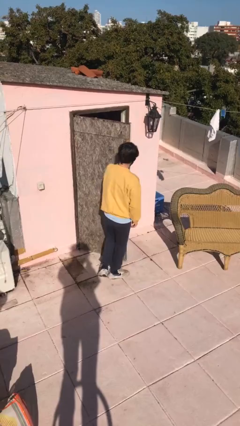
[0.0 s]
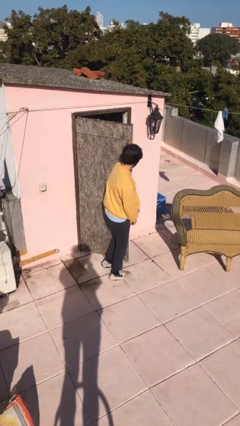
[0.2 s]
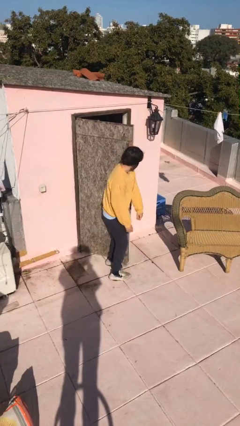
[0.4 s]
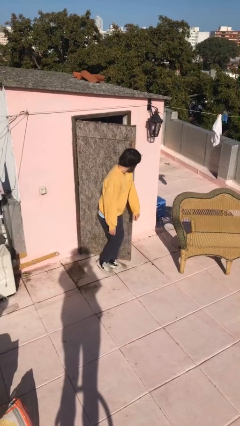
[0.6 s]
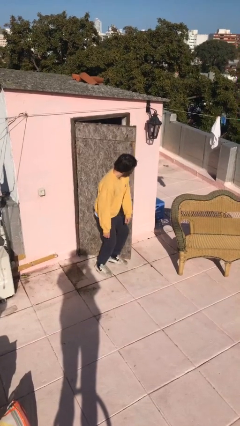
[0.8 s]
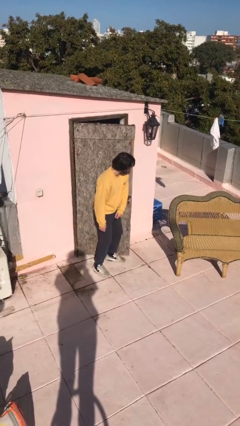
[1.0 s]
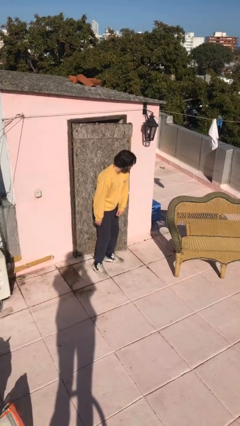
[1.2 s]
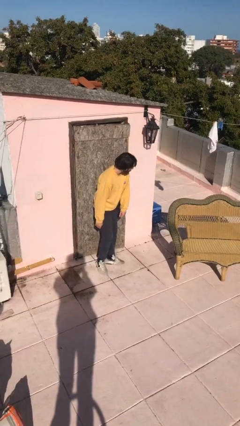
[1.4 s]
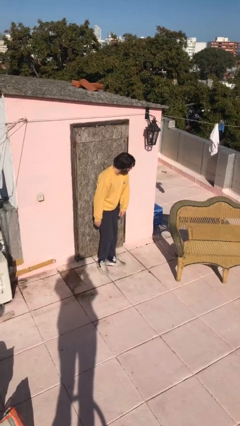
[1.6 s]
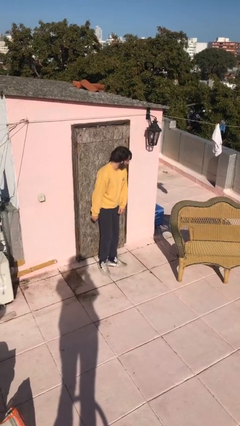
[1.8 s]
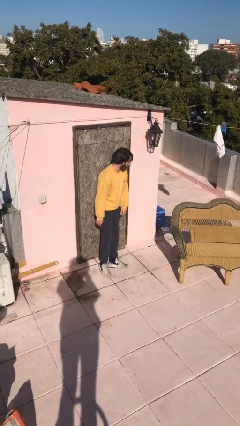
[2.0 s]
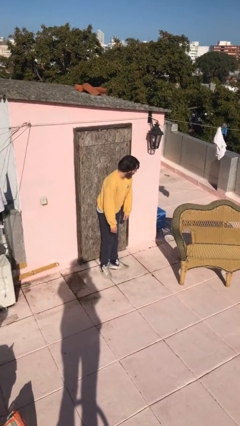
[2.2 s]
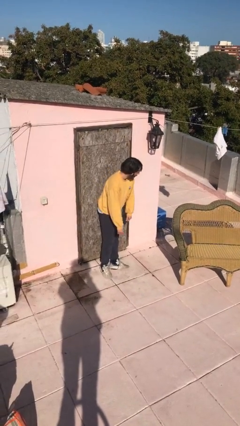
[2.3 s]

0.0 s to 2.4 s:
person closes door with hip

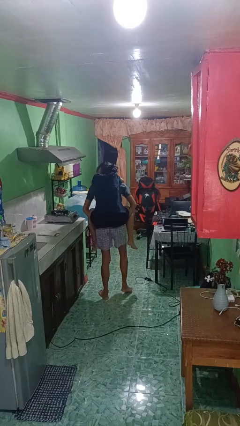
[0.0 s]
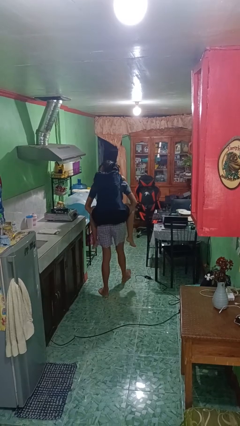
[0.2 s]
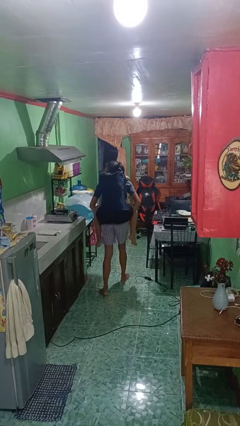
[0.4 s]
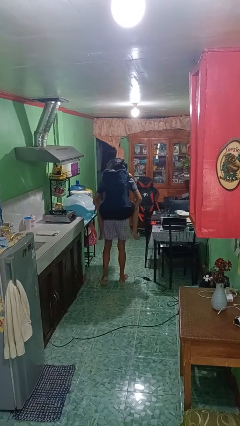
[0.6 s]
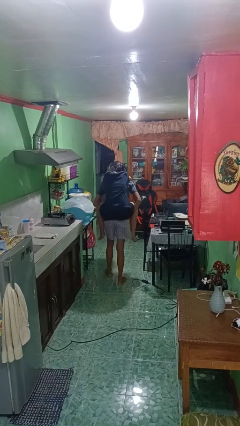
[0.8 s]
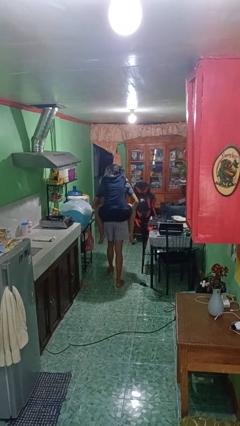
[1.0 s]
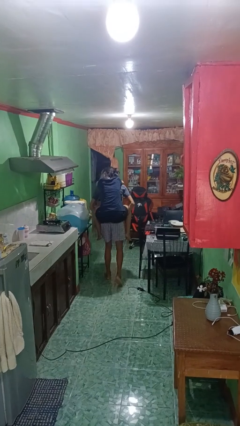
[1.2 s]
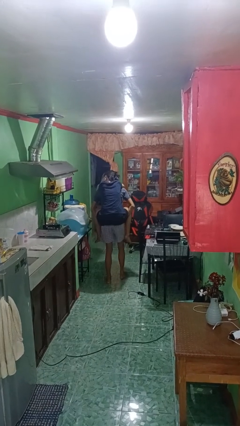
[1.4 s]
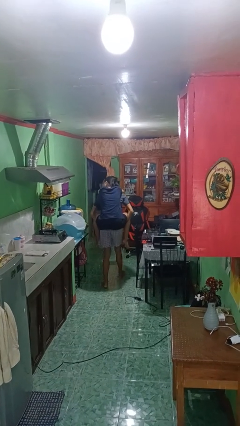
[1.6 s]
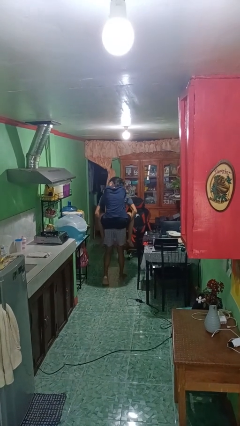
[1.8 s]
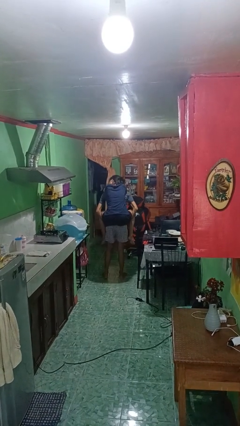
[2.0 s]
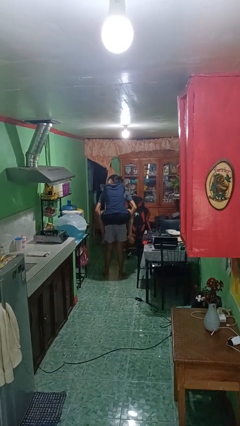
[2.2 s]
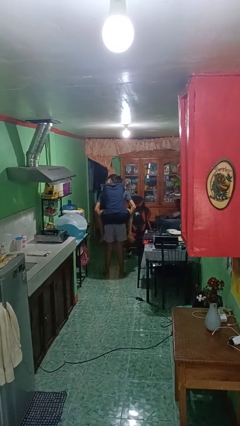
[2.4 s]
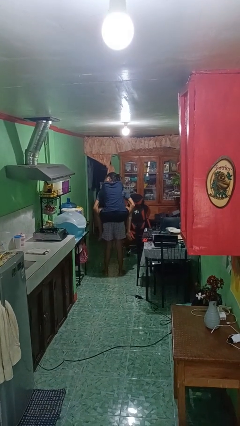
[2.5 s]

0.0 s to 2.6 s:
person carries person on back

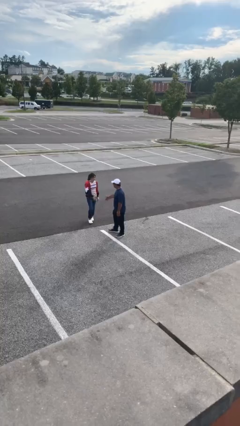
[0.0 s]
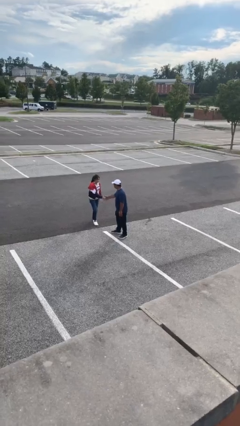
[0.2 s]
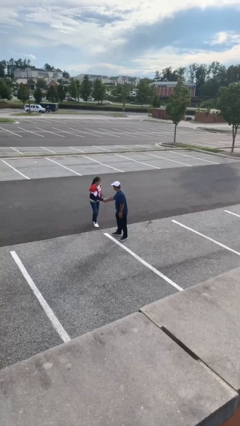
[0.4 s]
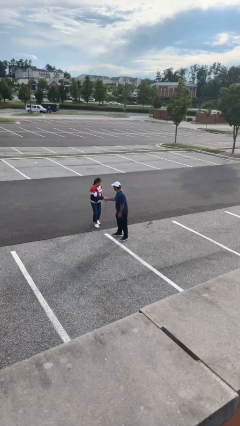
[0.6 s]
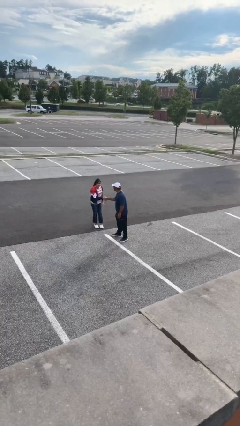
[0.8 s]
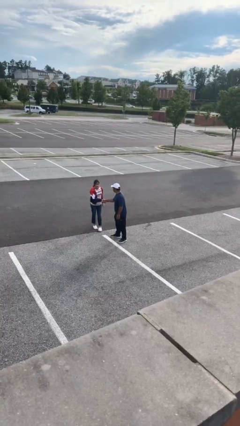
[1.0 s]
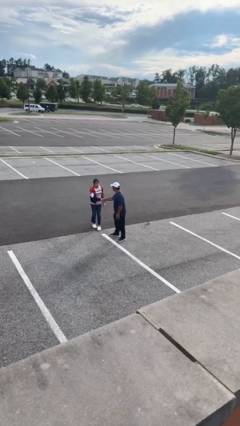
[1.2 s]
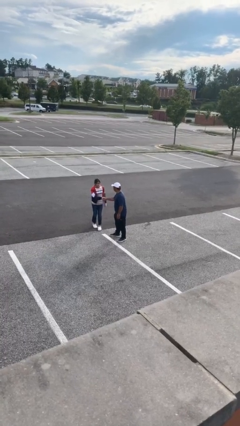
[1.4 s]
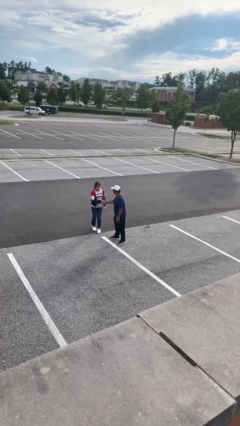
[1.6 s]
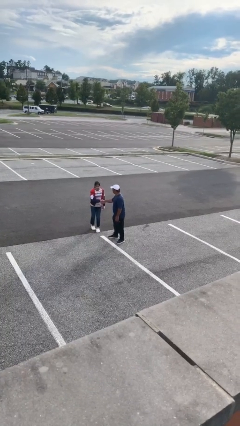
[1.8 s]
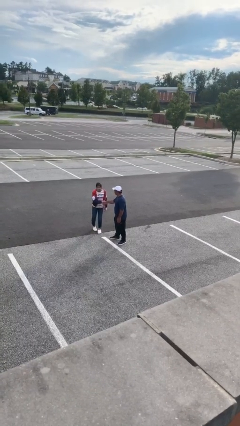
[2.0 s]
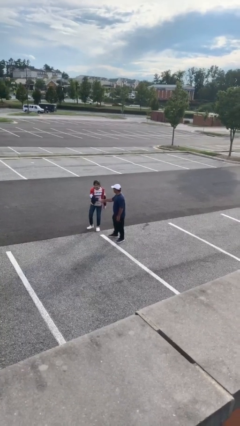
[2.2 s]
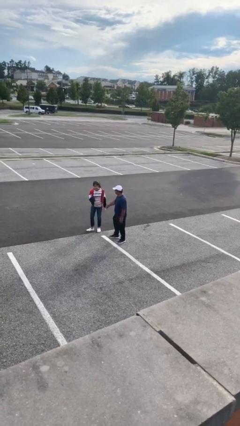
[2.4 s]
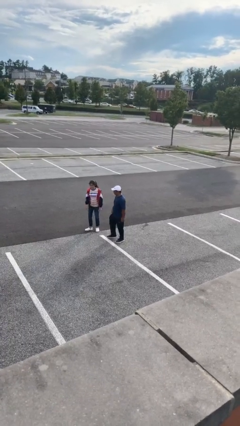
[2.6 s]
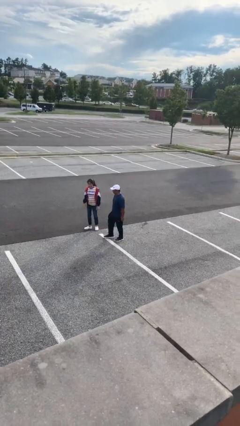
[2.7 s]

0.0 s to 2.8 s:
person shakes hand

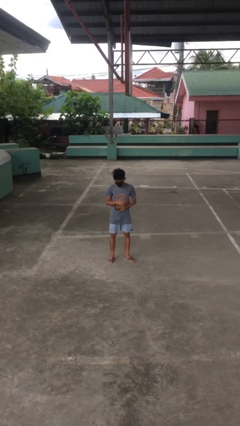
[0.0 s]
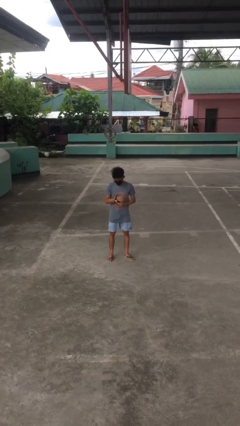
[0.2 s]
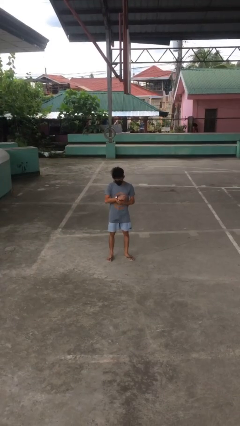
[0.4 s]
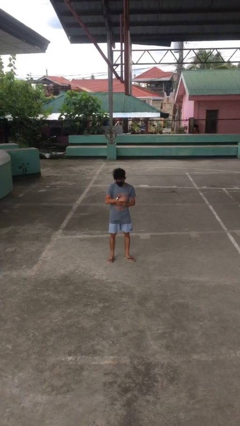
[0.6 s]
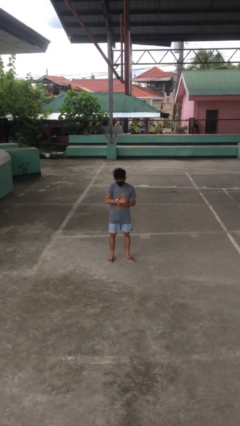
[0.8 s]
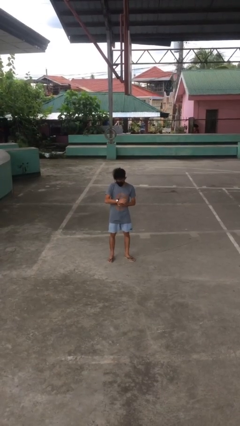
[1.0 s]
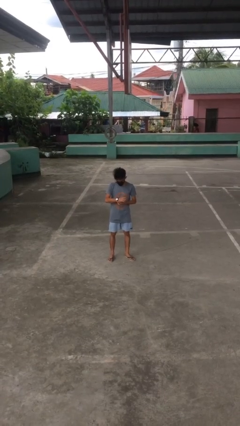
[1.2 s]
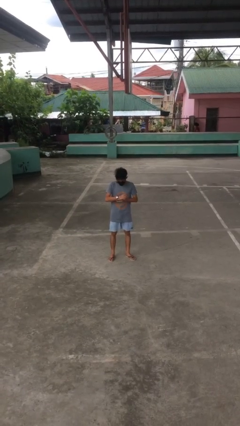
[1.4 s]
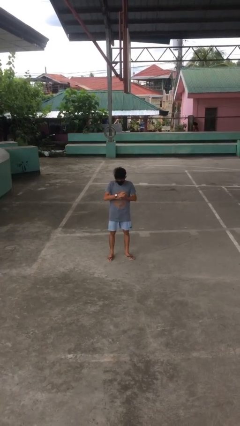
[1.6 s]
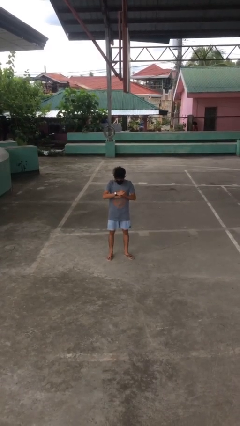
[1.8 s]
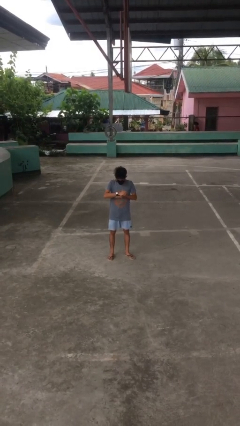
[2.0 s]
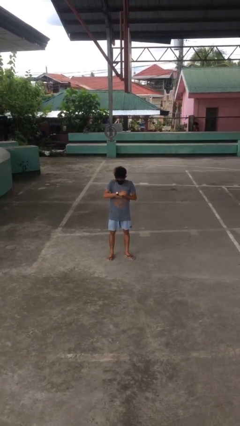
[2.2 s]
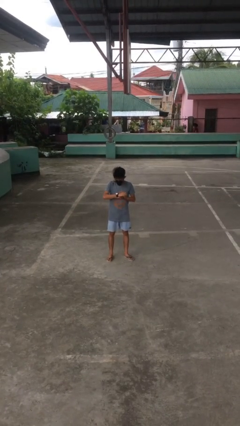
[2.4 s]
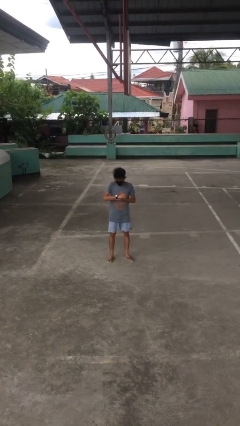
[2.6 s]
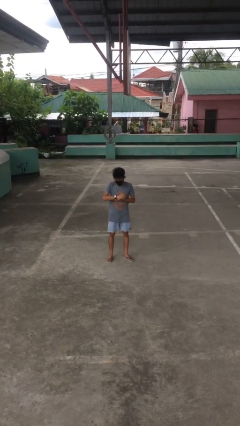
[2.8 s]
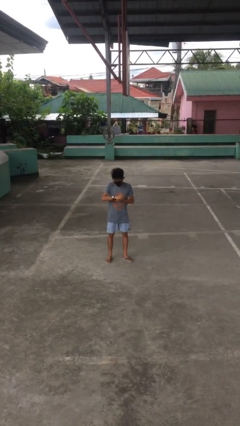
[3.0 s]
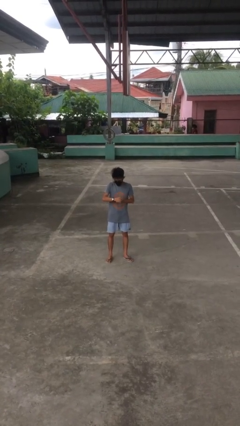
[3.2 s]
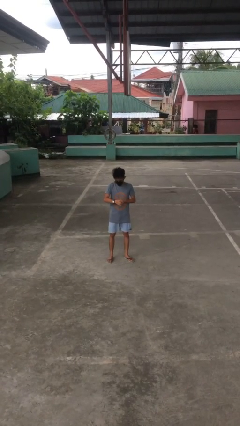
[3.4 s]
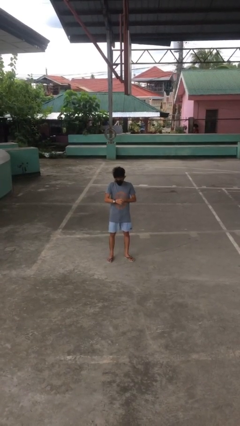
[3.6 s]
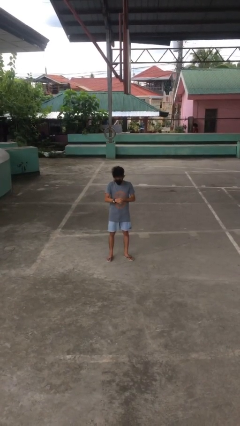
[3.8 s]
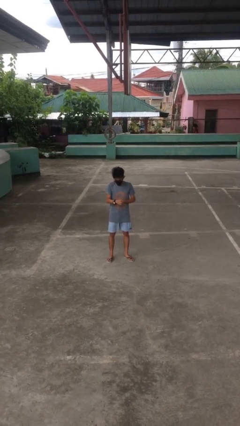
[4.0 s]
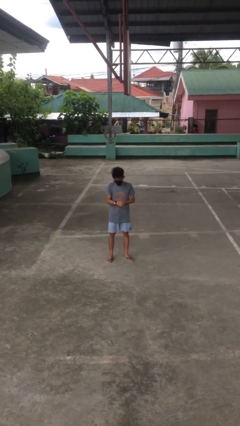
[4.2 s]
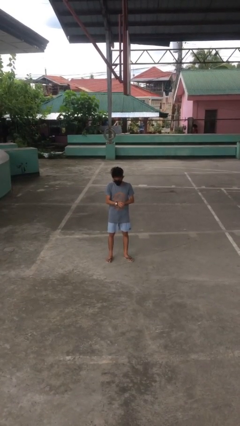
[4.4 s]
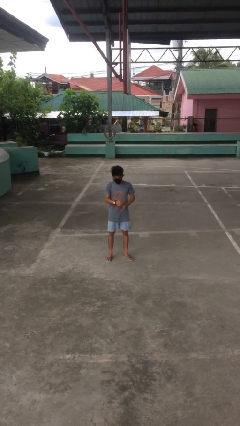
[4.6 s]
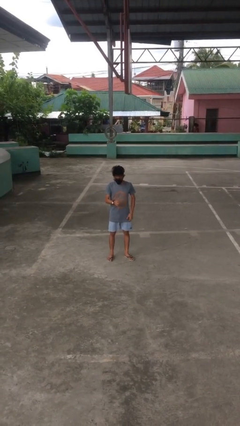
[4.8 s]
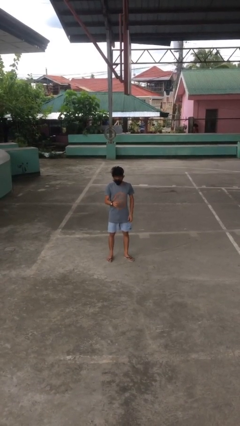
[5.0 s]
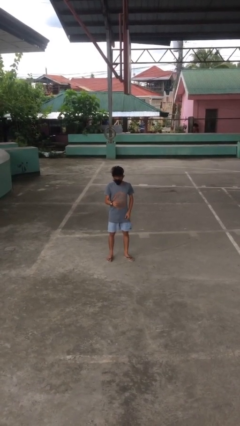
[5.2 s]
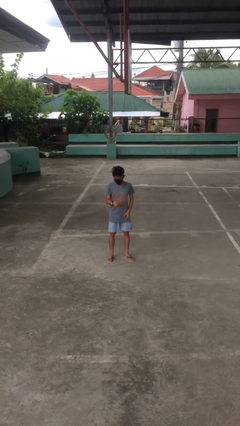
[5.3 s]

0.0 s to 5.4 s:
person puts on wristwatch

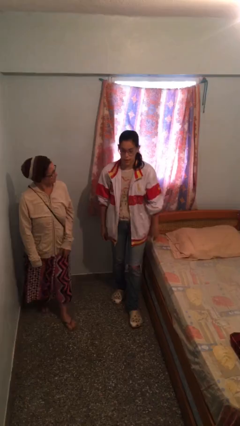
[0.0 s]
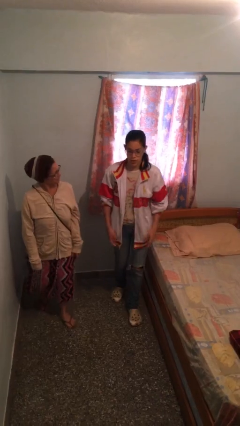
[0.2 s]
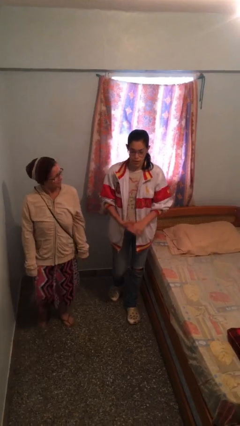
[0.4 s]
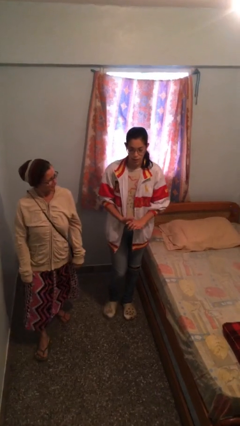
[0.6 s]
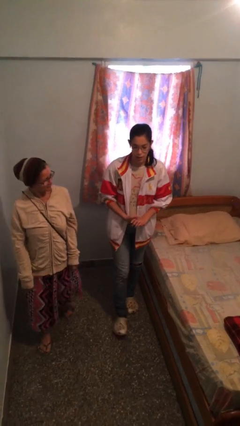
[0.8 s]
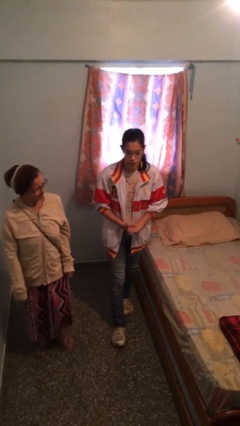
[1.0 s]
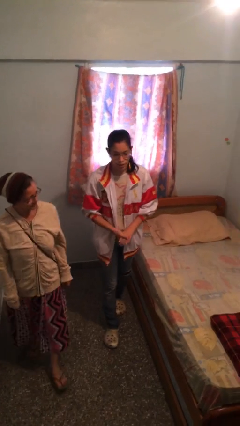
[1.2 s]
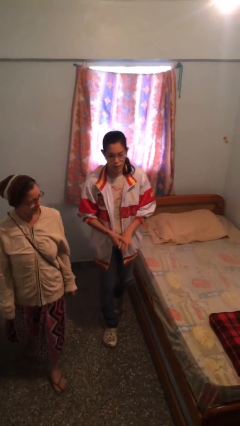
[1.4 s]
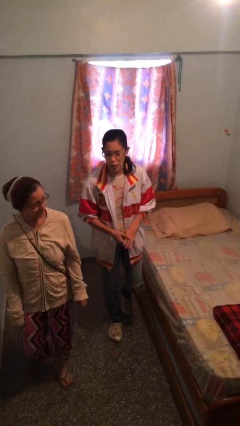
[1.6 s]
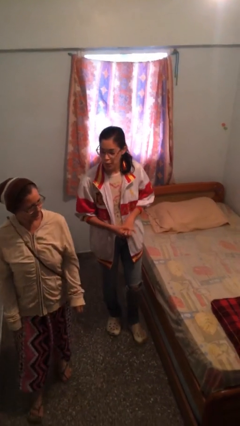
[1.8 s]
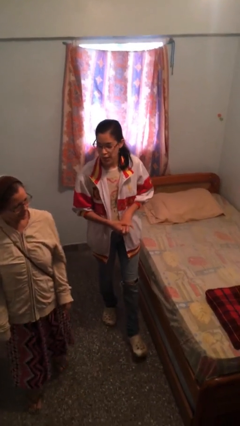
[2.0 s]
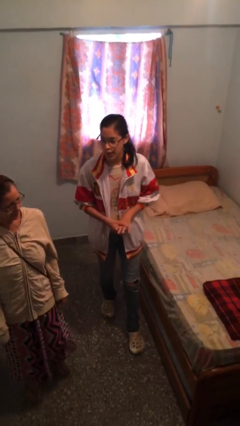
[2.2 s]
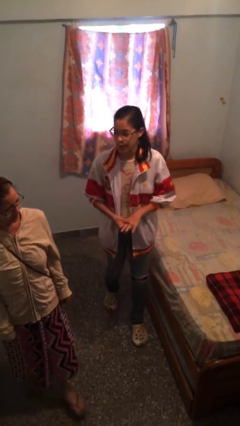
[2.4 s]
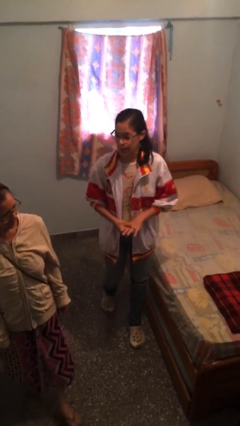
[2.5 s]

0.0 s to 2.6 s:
person talks to person

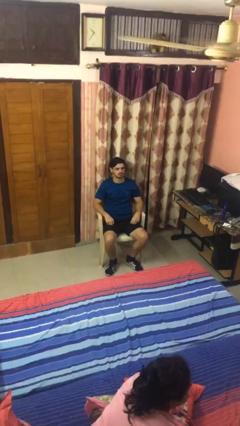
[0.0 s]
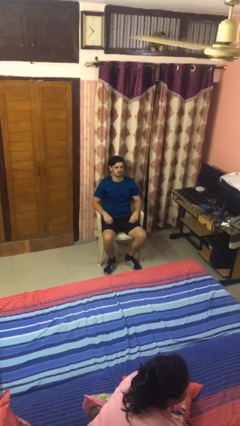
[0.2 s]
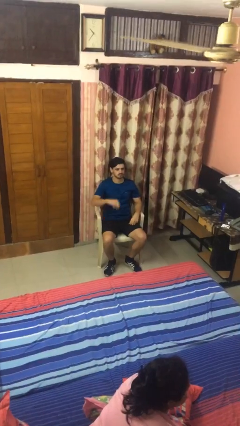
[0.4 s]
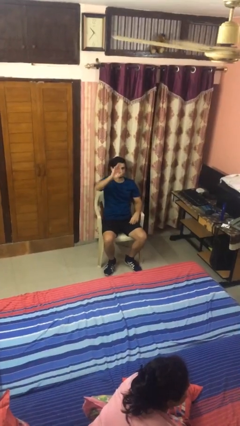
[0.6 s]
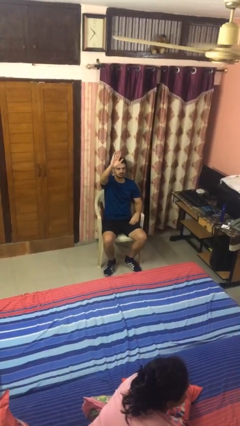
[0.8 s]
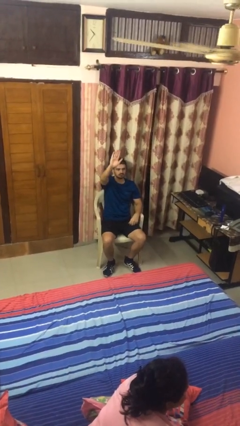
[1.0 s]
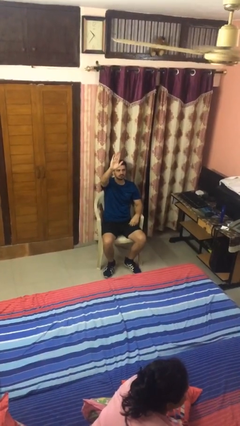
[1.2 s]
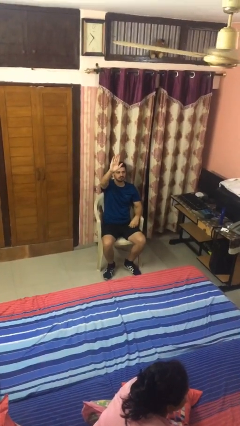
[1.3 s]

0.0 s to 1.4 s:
person gestures raise hand

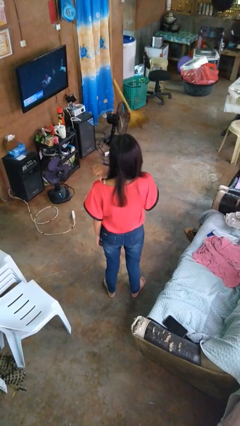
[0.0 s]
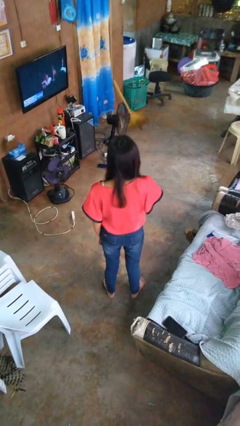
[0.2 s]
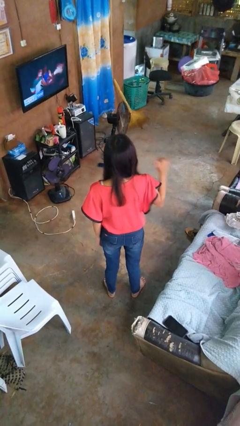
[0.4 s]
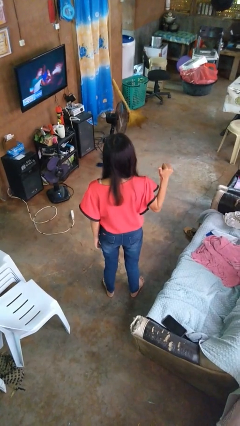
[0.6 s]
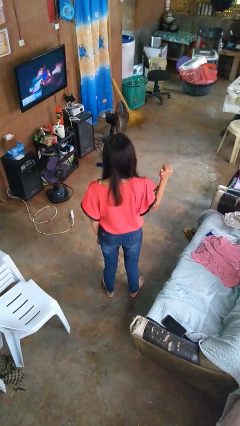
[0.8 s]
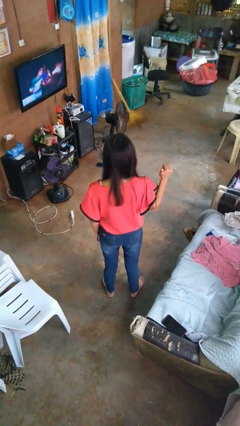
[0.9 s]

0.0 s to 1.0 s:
person gestures cut
